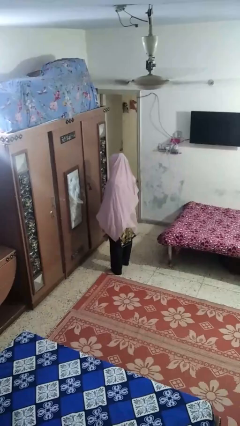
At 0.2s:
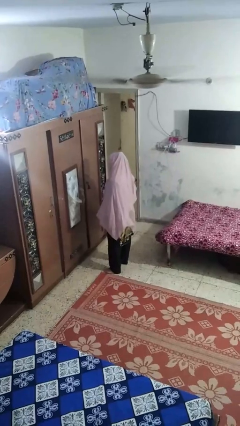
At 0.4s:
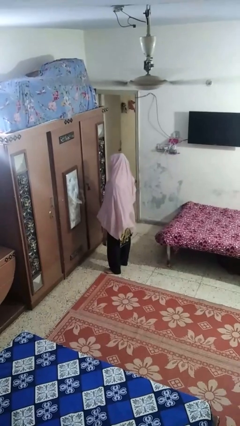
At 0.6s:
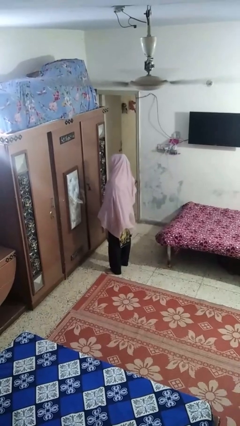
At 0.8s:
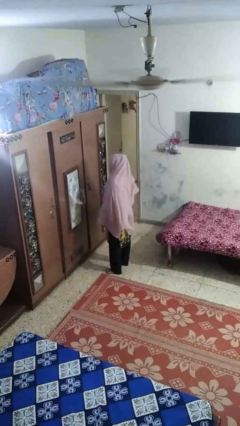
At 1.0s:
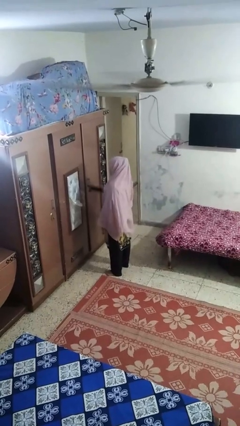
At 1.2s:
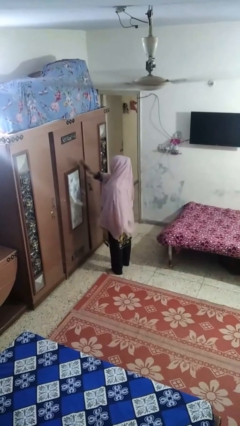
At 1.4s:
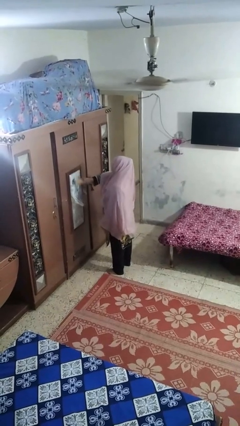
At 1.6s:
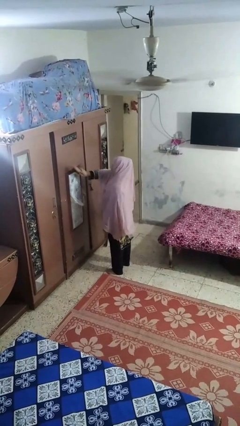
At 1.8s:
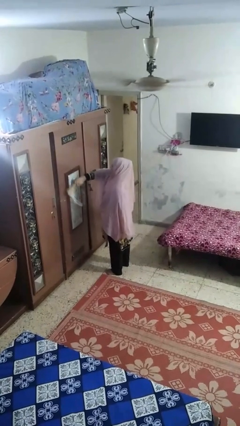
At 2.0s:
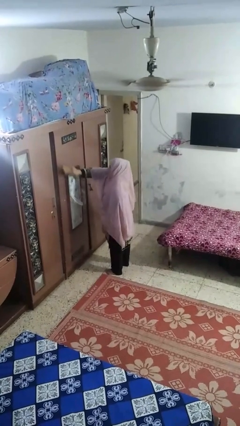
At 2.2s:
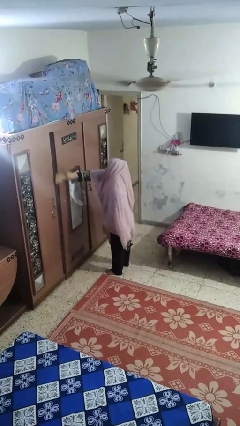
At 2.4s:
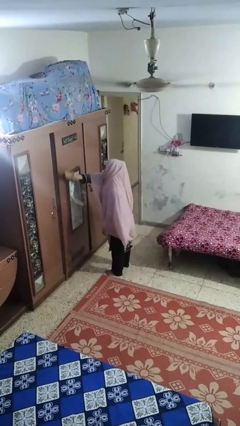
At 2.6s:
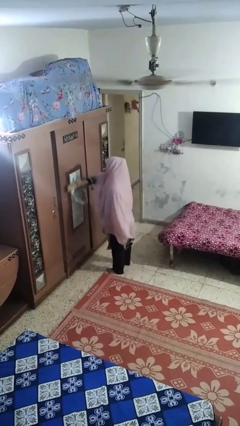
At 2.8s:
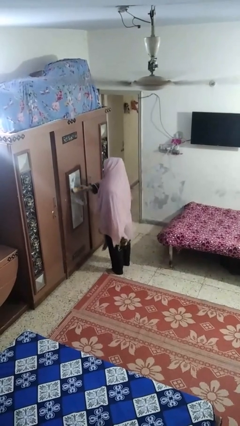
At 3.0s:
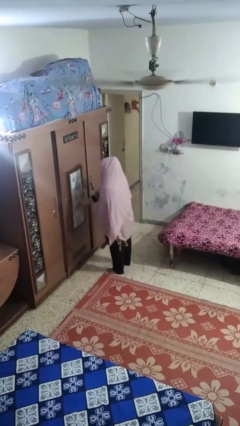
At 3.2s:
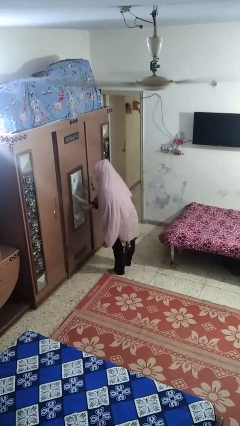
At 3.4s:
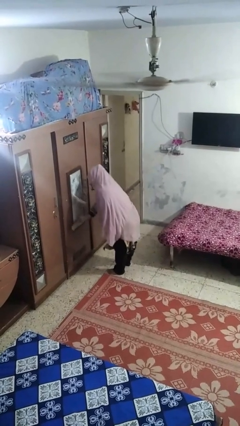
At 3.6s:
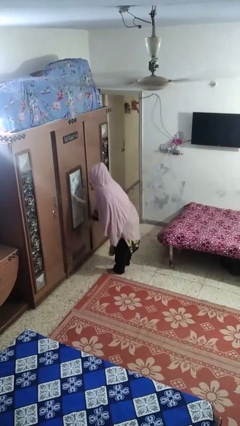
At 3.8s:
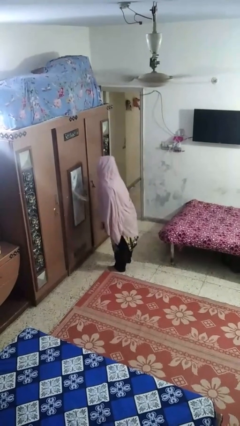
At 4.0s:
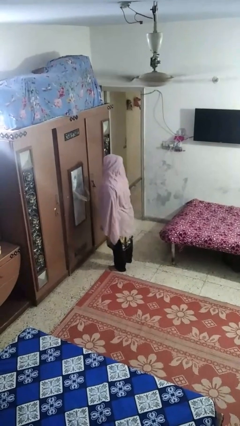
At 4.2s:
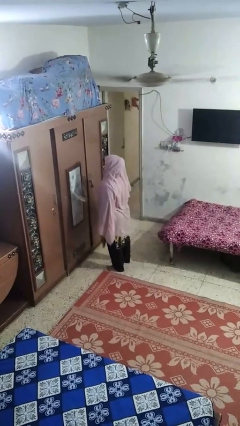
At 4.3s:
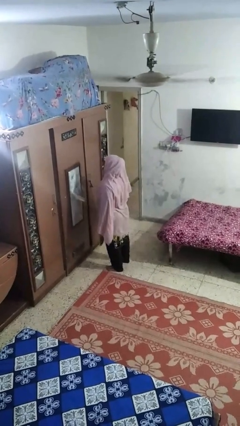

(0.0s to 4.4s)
person dusts furniture

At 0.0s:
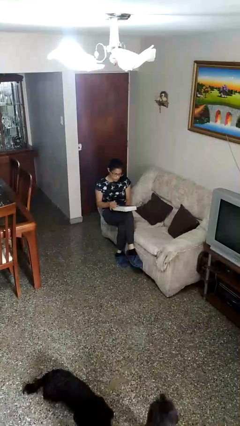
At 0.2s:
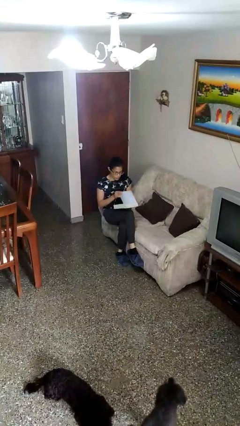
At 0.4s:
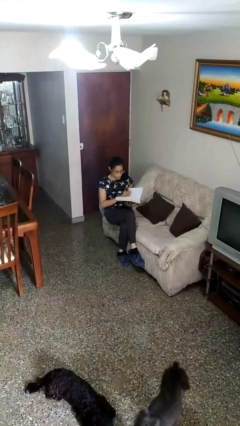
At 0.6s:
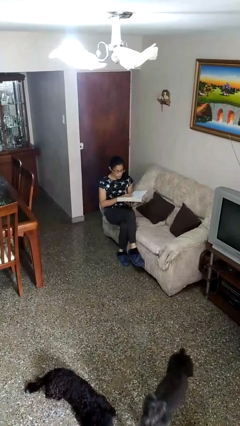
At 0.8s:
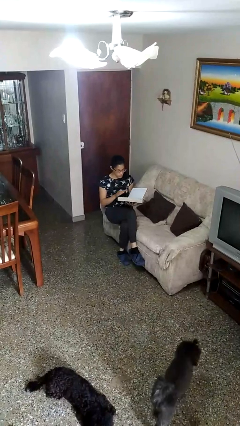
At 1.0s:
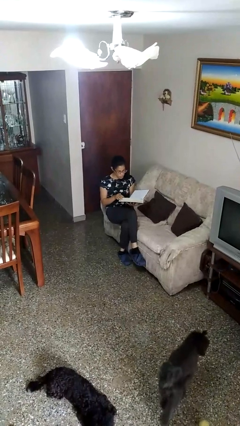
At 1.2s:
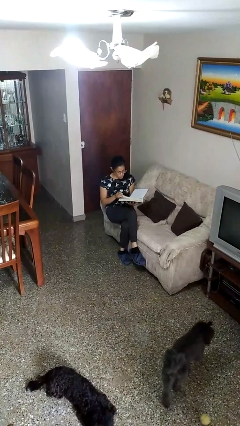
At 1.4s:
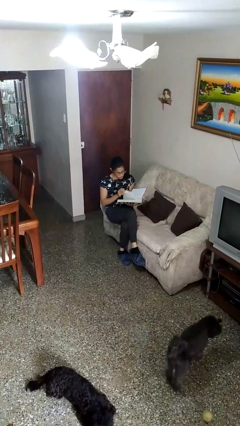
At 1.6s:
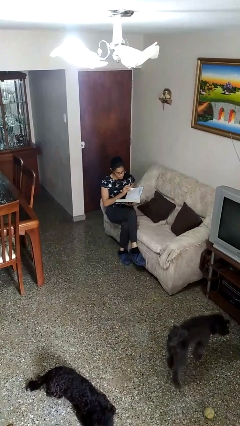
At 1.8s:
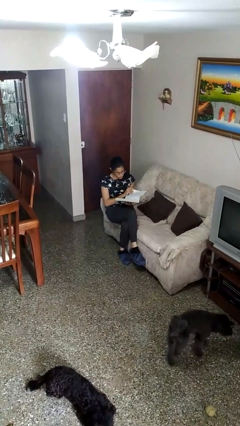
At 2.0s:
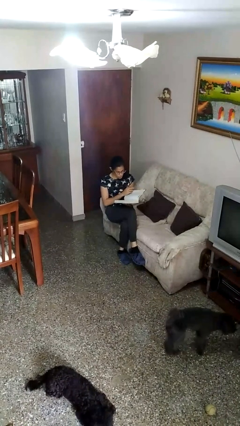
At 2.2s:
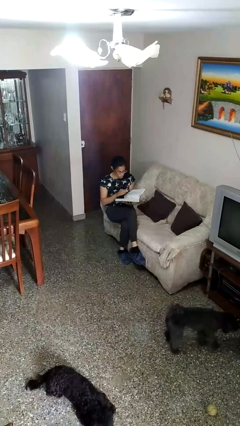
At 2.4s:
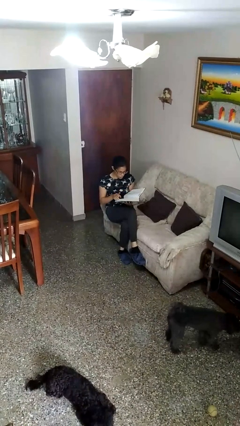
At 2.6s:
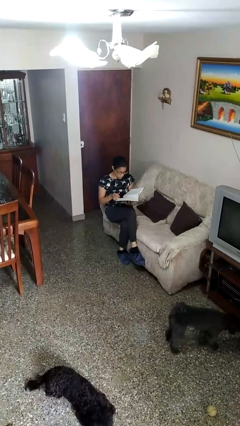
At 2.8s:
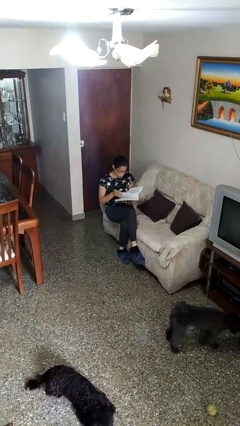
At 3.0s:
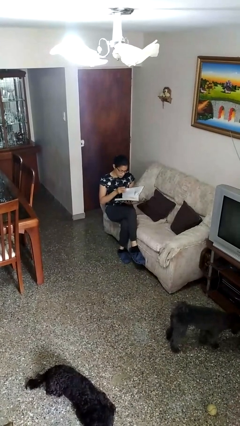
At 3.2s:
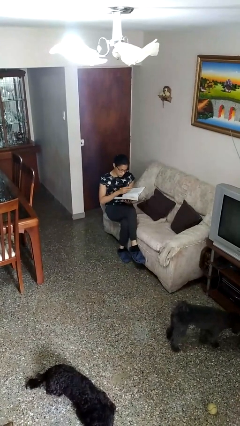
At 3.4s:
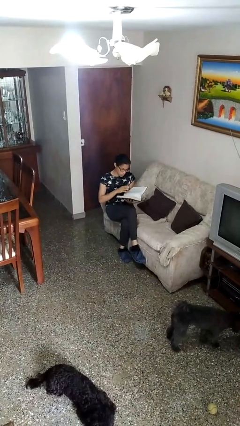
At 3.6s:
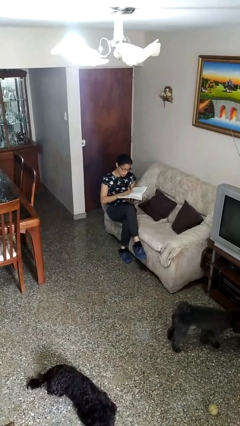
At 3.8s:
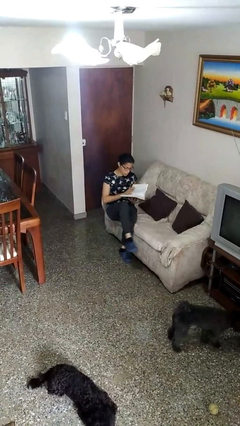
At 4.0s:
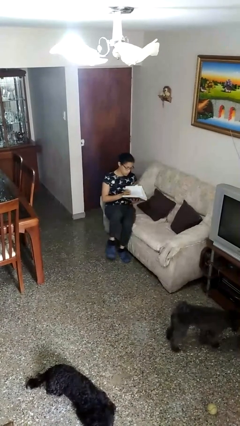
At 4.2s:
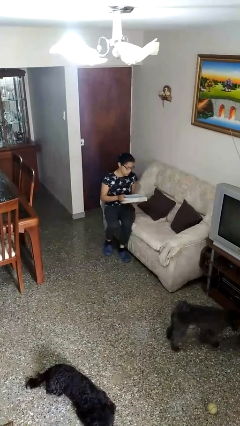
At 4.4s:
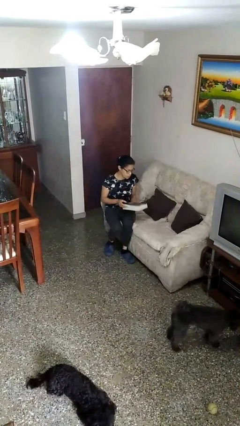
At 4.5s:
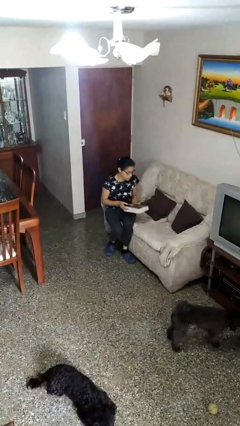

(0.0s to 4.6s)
person reads book

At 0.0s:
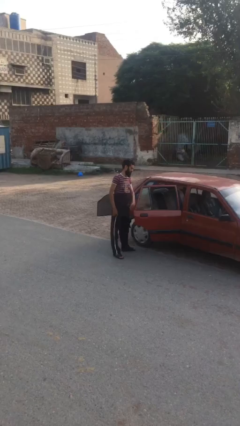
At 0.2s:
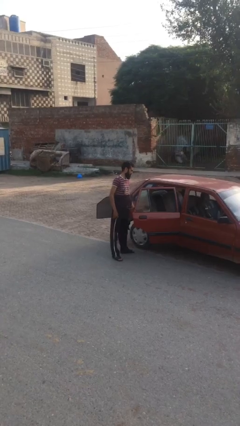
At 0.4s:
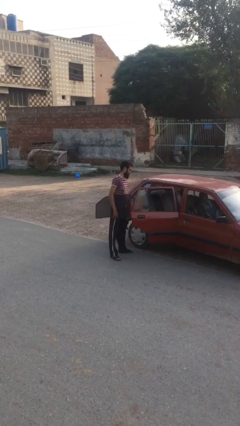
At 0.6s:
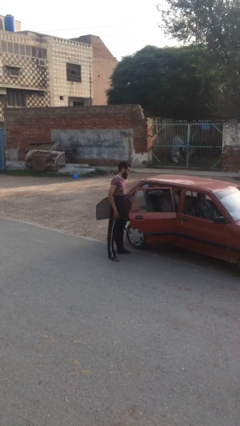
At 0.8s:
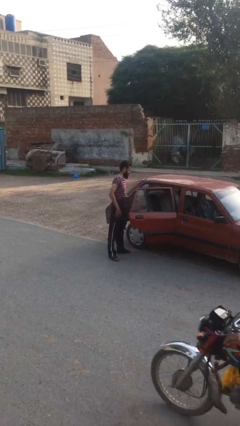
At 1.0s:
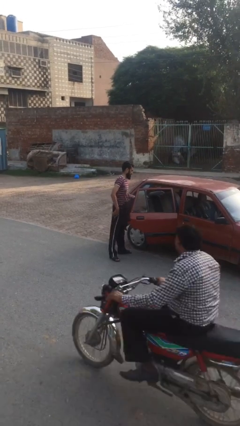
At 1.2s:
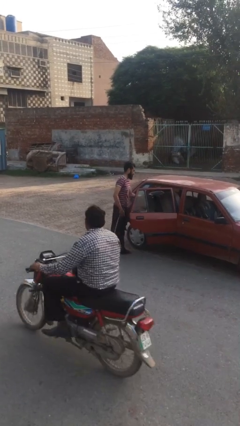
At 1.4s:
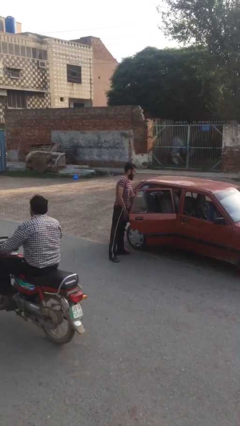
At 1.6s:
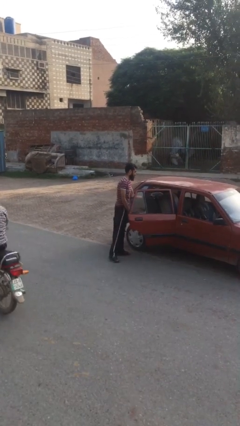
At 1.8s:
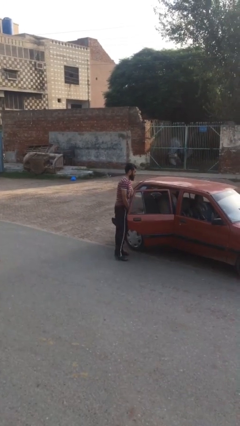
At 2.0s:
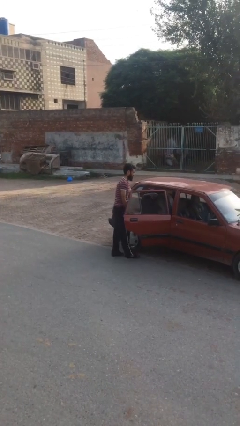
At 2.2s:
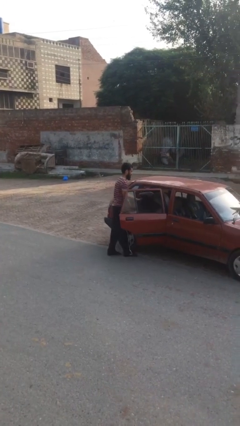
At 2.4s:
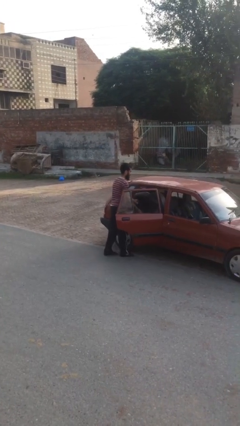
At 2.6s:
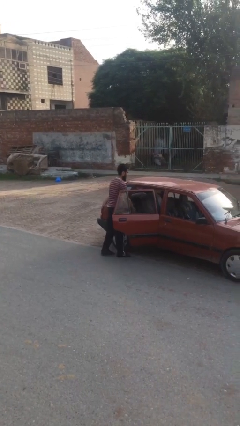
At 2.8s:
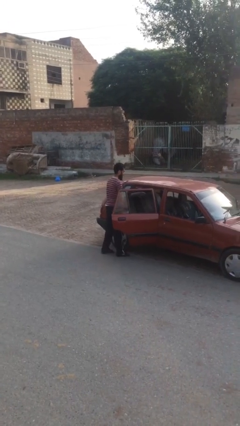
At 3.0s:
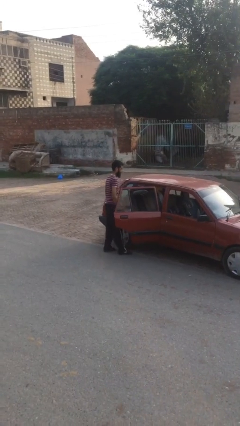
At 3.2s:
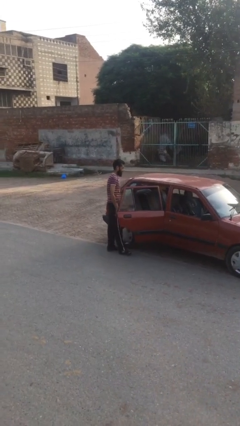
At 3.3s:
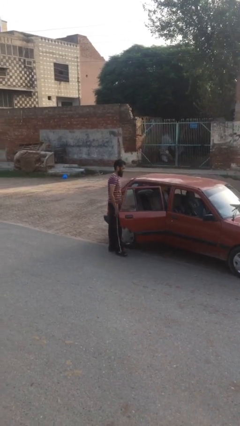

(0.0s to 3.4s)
person loads car

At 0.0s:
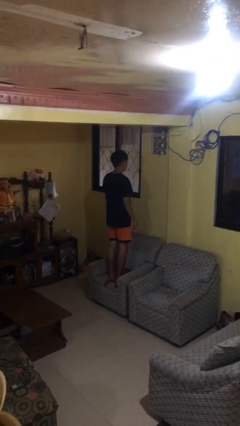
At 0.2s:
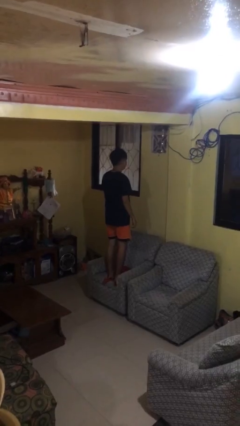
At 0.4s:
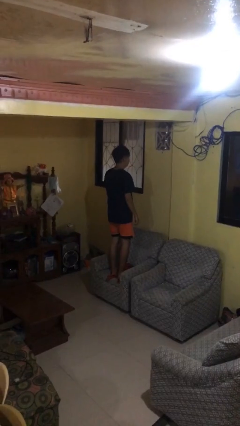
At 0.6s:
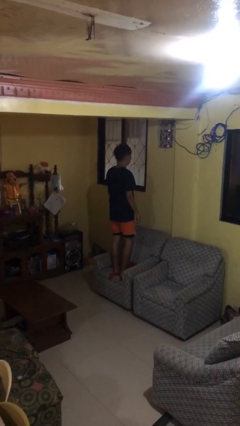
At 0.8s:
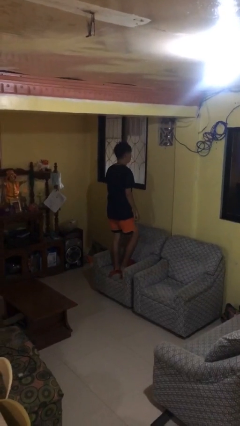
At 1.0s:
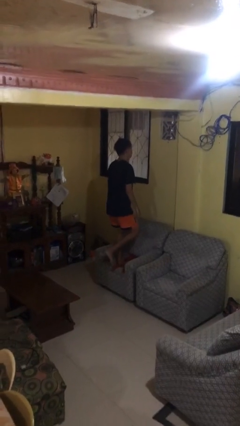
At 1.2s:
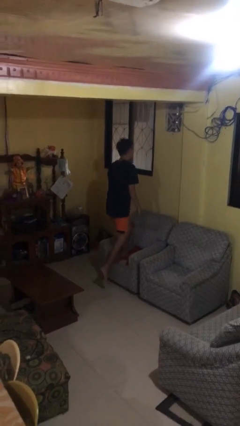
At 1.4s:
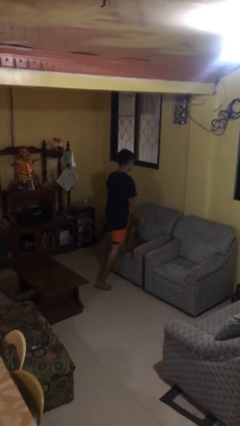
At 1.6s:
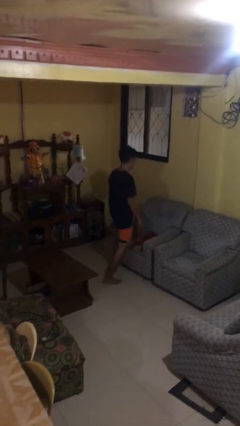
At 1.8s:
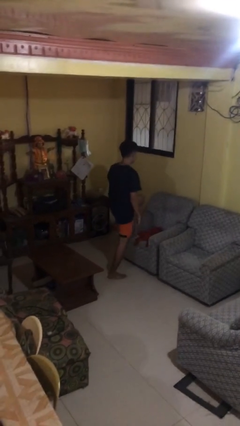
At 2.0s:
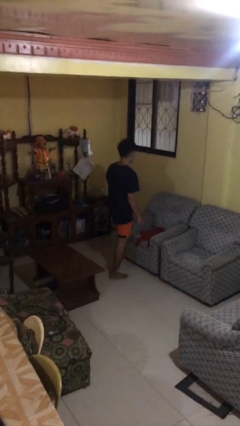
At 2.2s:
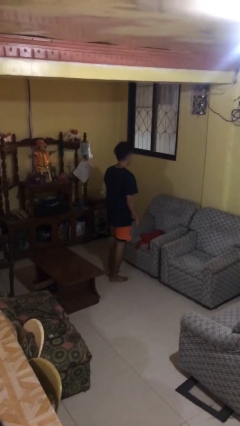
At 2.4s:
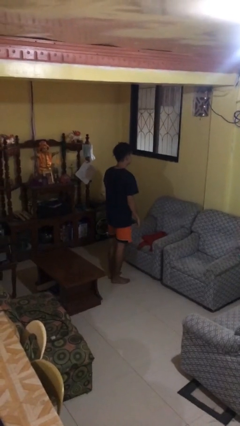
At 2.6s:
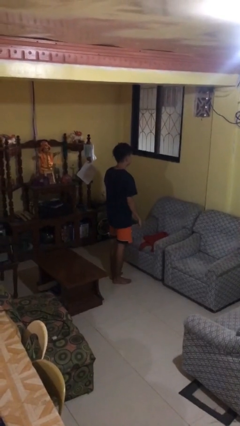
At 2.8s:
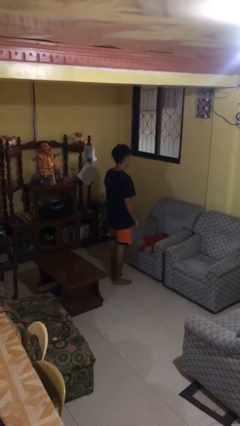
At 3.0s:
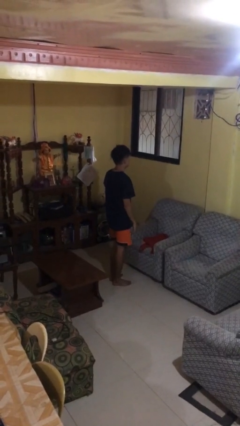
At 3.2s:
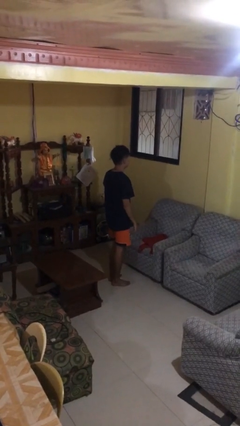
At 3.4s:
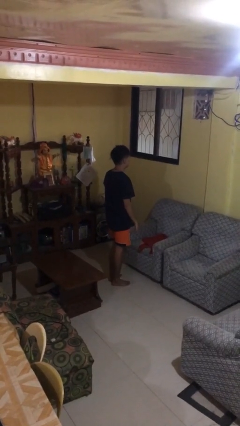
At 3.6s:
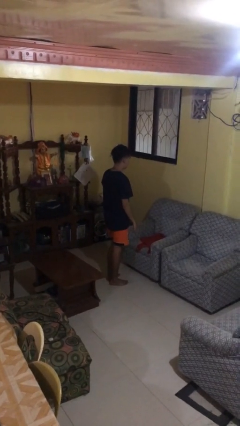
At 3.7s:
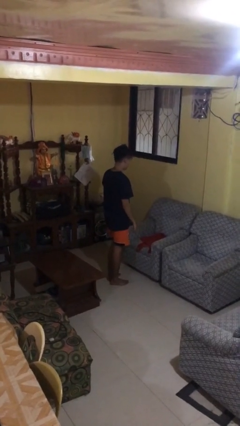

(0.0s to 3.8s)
person climbs off couch

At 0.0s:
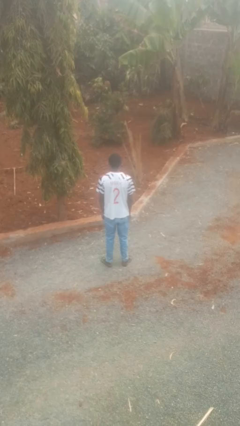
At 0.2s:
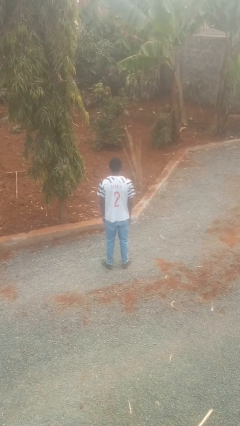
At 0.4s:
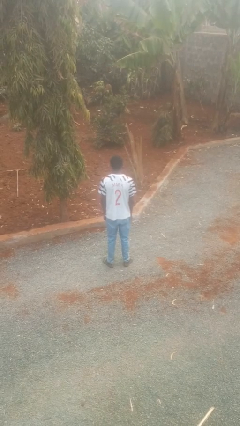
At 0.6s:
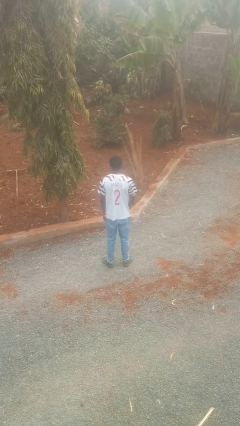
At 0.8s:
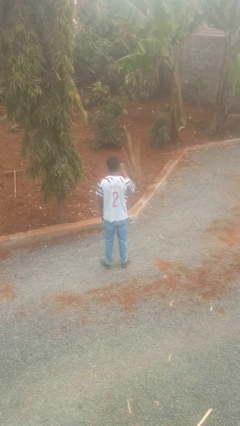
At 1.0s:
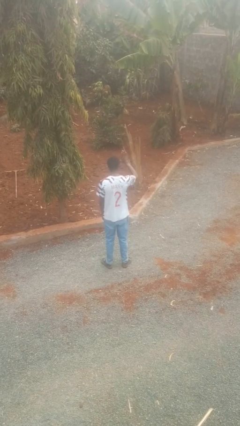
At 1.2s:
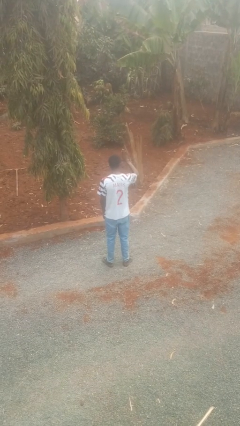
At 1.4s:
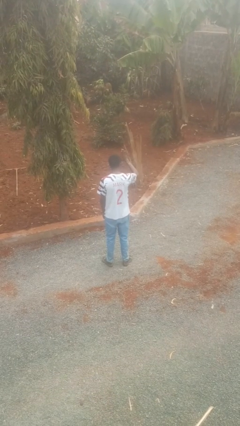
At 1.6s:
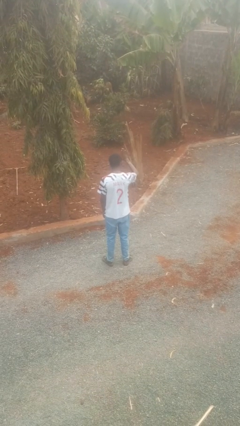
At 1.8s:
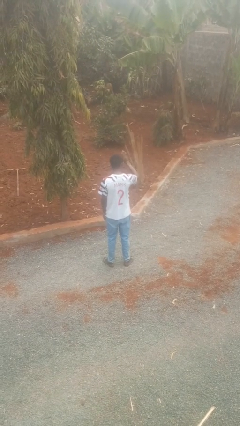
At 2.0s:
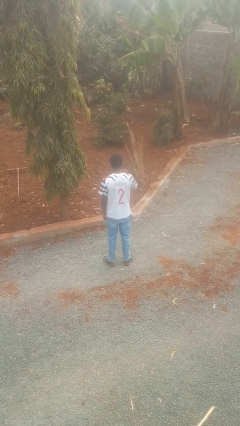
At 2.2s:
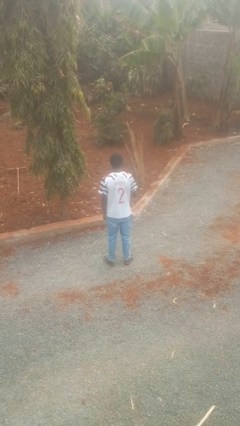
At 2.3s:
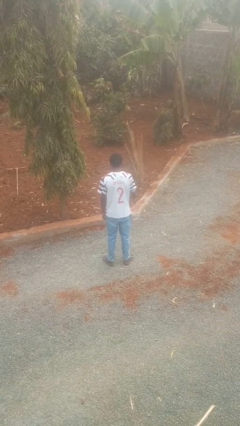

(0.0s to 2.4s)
person gestures stop
